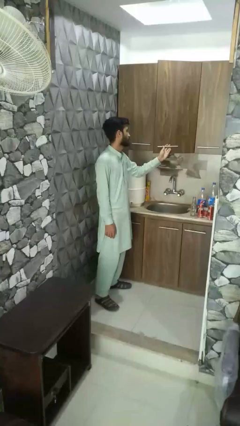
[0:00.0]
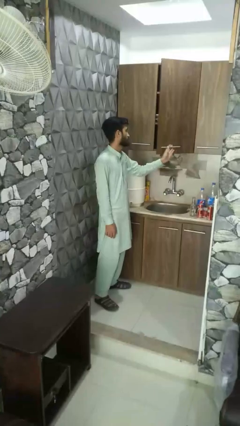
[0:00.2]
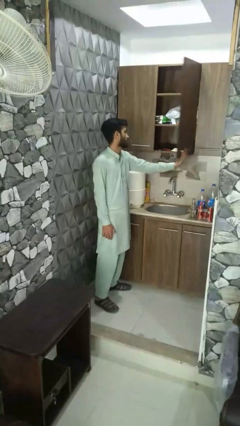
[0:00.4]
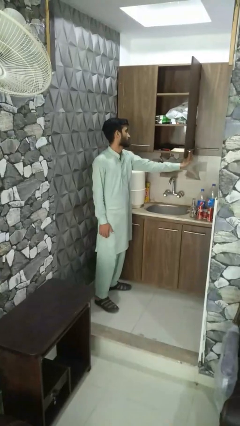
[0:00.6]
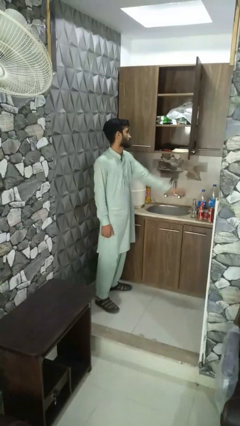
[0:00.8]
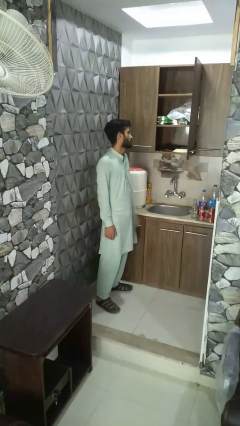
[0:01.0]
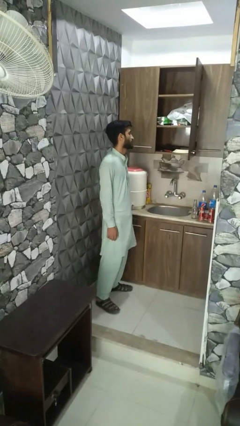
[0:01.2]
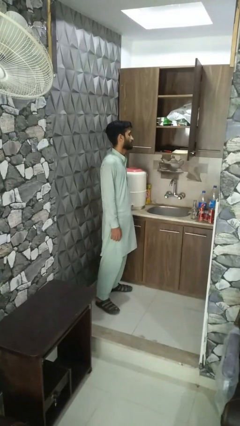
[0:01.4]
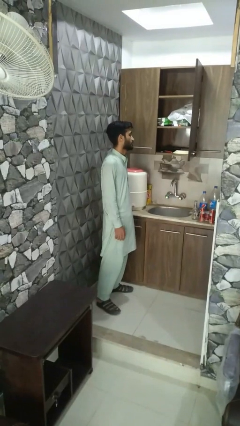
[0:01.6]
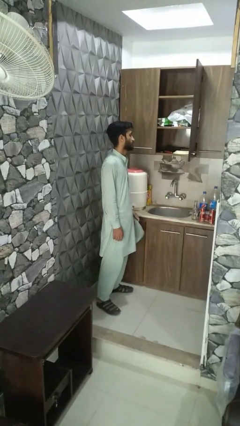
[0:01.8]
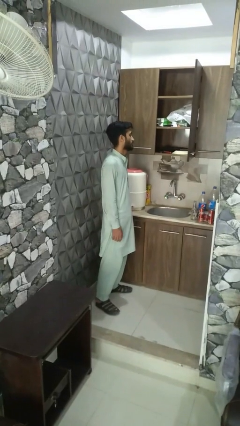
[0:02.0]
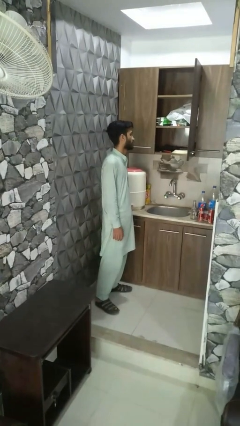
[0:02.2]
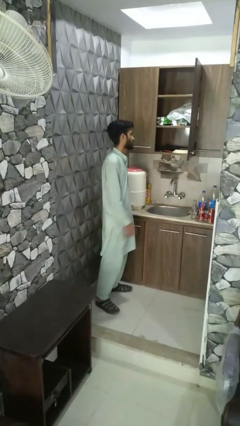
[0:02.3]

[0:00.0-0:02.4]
person opens cabinet

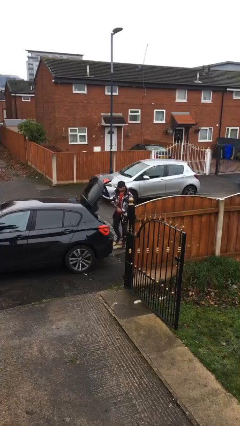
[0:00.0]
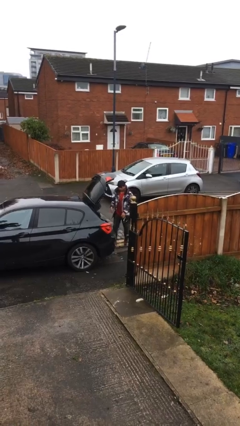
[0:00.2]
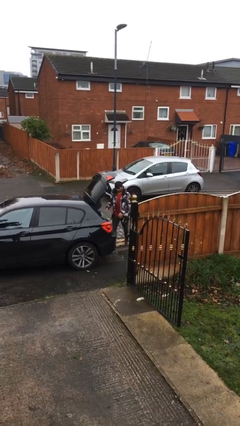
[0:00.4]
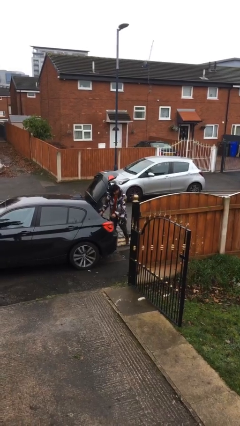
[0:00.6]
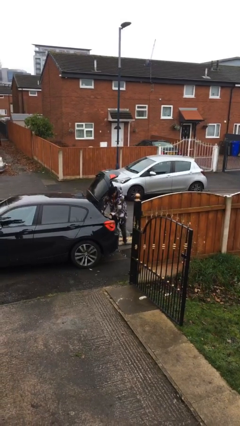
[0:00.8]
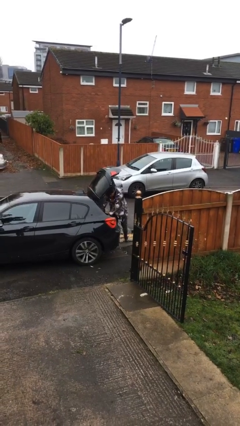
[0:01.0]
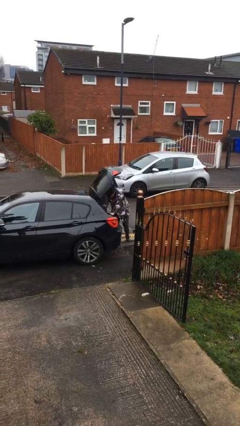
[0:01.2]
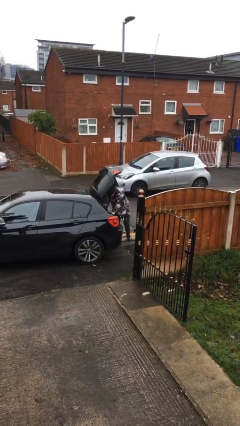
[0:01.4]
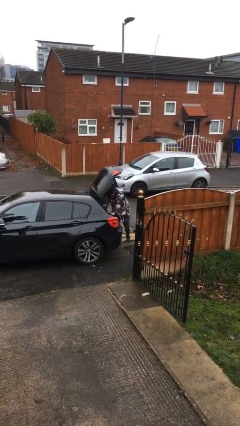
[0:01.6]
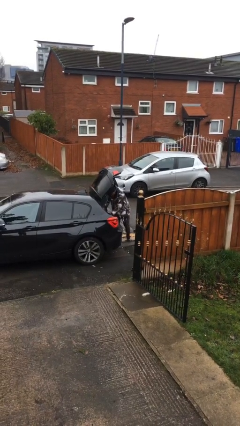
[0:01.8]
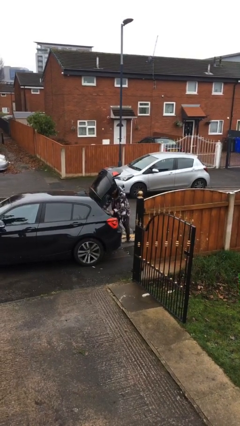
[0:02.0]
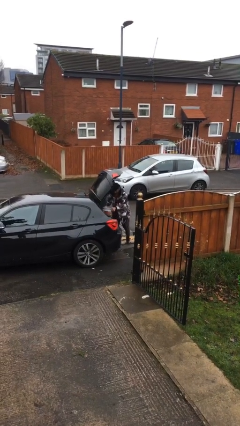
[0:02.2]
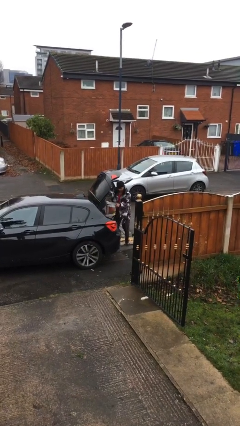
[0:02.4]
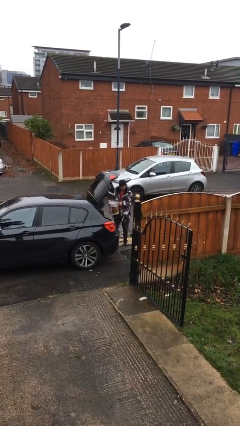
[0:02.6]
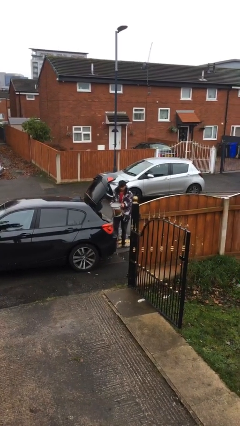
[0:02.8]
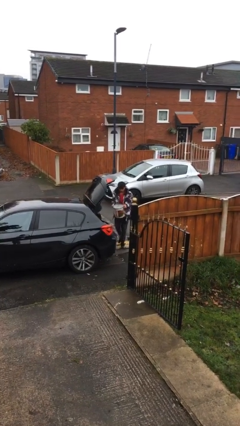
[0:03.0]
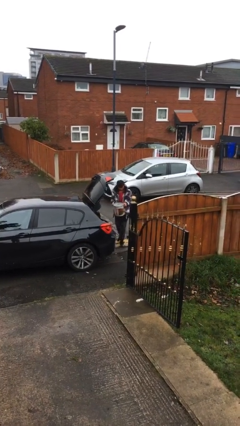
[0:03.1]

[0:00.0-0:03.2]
person unloads car

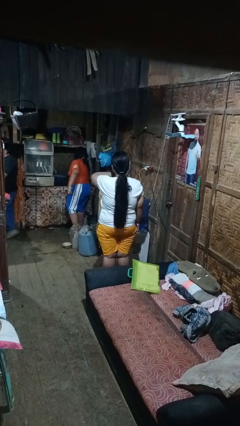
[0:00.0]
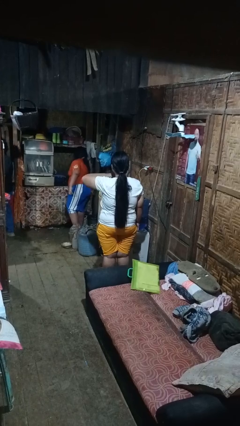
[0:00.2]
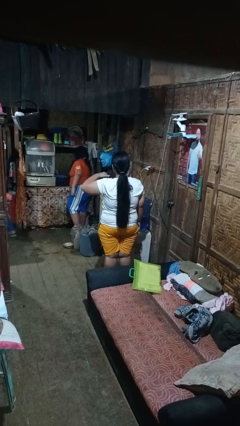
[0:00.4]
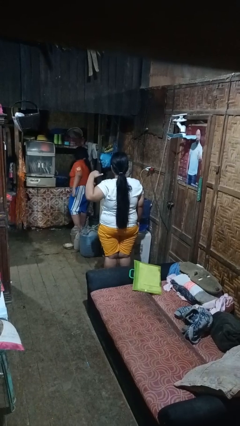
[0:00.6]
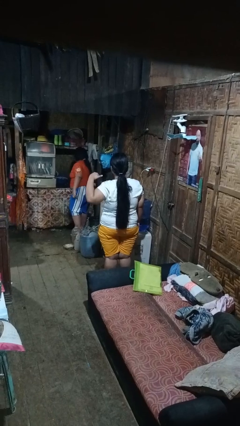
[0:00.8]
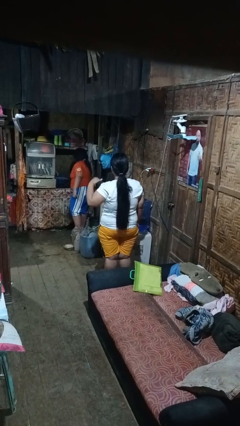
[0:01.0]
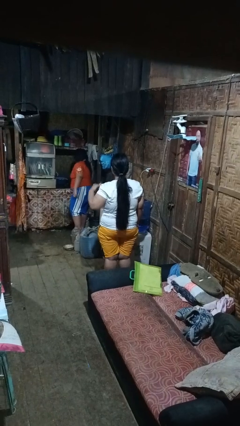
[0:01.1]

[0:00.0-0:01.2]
person gestures cut

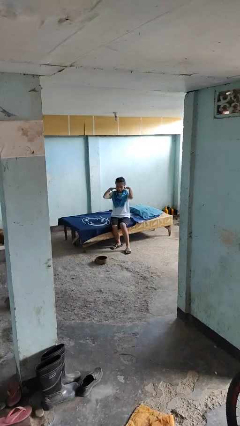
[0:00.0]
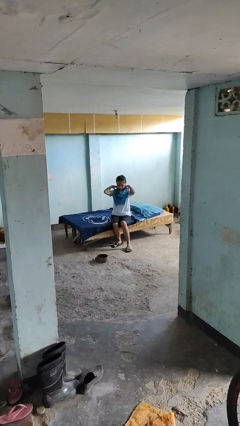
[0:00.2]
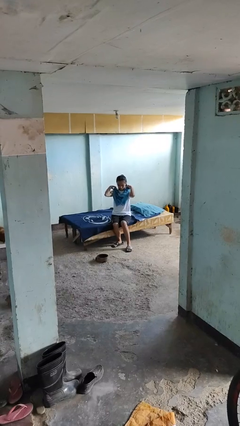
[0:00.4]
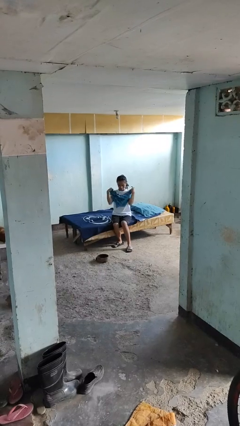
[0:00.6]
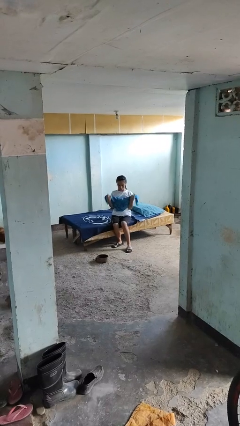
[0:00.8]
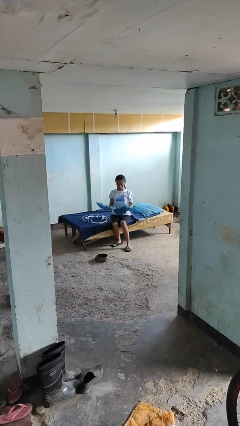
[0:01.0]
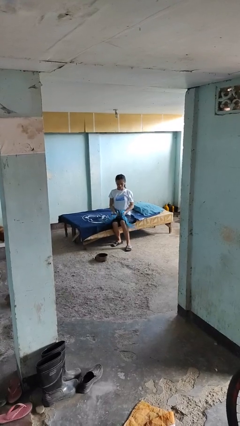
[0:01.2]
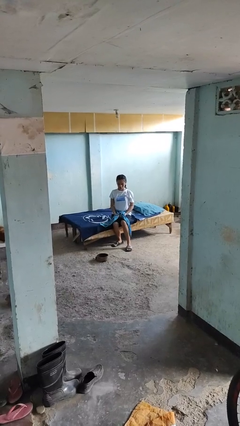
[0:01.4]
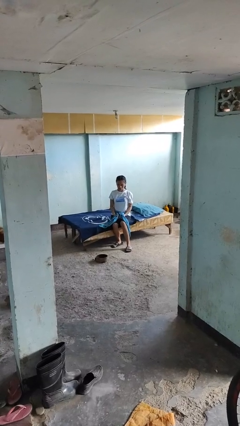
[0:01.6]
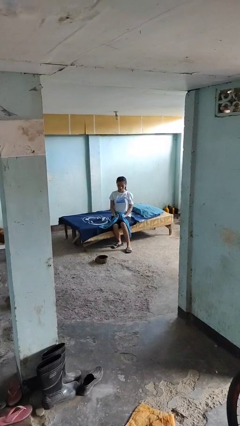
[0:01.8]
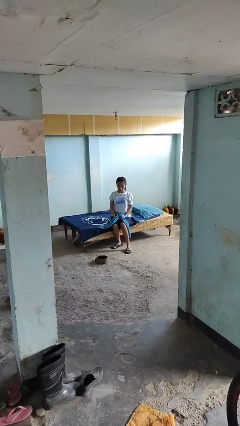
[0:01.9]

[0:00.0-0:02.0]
person takes off scarf

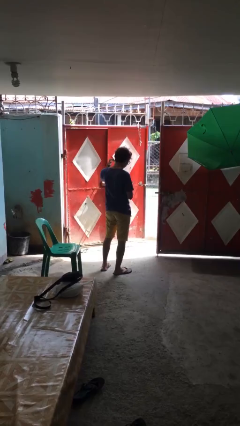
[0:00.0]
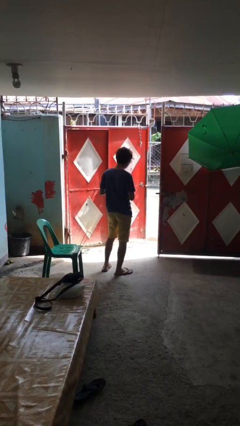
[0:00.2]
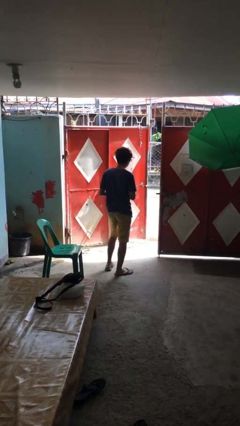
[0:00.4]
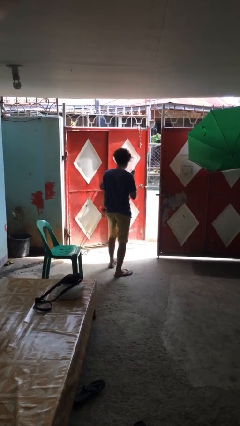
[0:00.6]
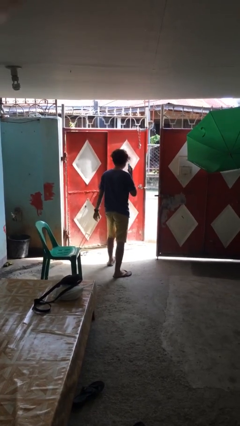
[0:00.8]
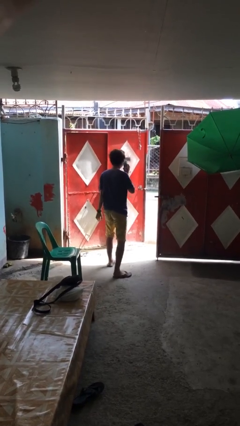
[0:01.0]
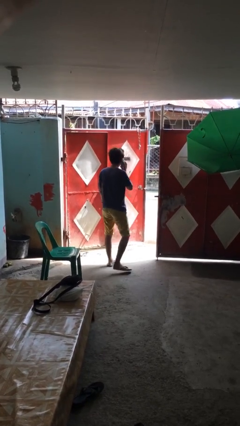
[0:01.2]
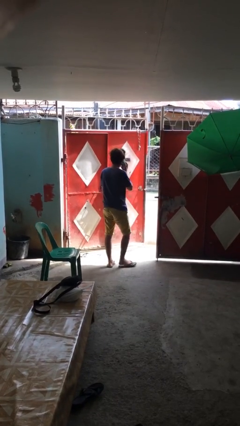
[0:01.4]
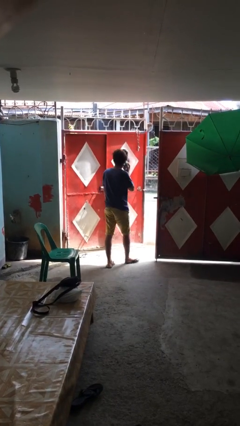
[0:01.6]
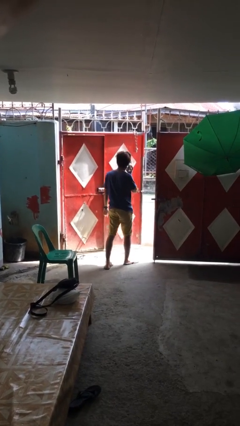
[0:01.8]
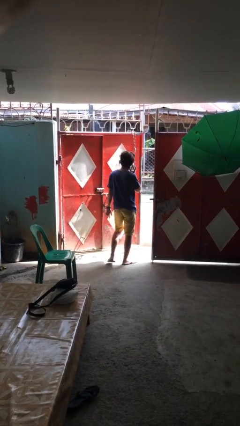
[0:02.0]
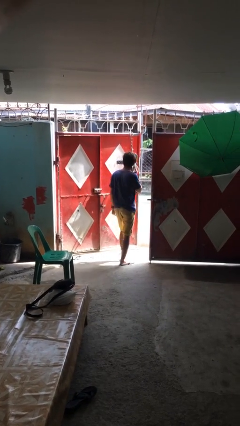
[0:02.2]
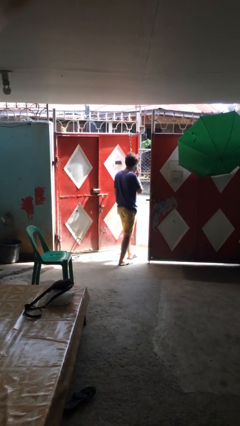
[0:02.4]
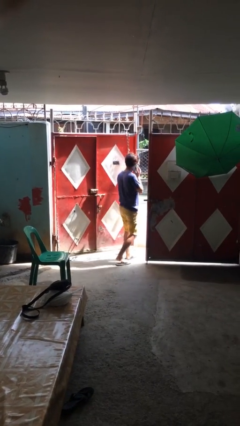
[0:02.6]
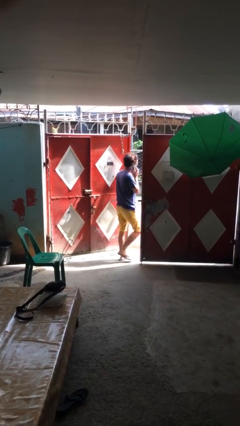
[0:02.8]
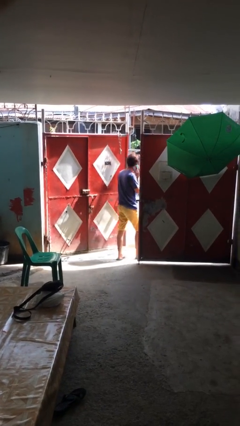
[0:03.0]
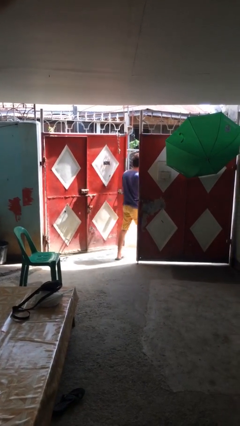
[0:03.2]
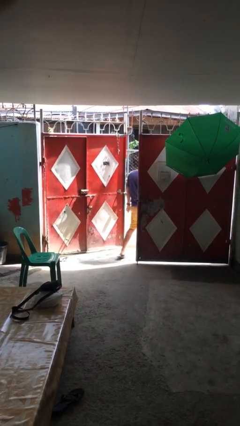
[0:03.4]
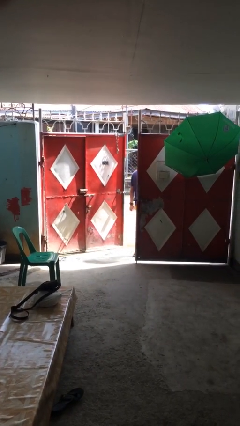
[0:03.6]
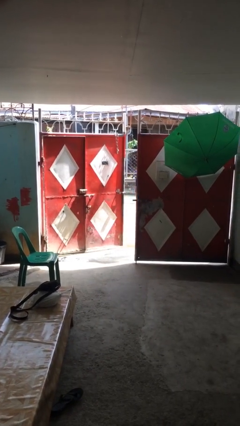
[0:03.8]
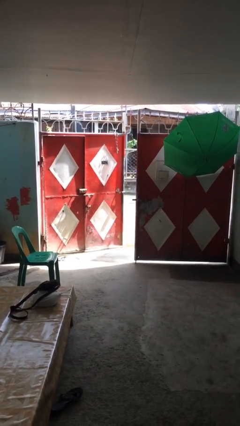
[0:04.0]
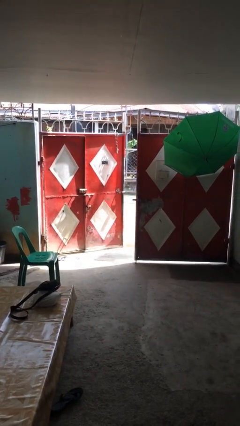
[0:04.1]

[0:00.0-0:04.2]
person exits scene through structure

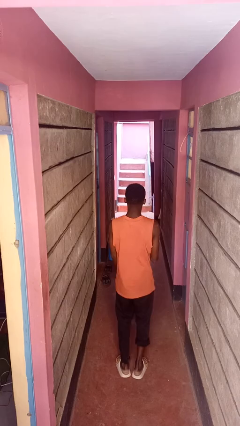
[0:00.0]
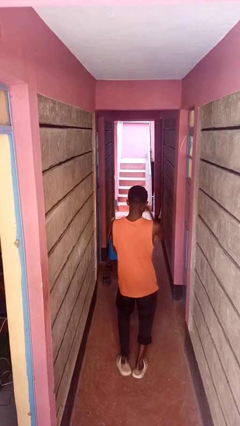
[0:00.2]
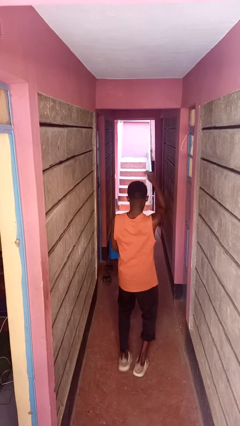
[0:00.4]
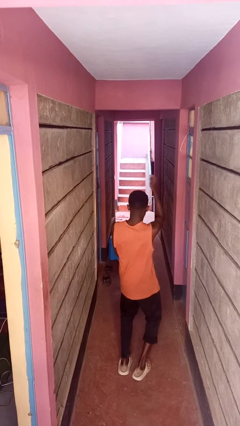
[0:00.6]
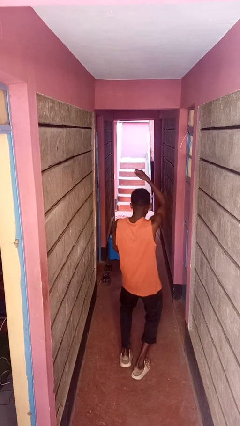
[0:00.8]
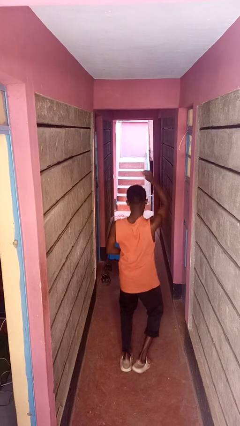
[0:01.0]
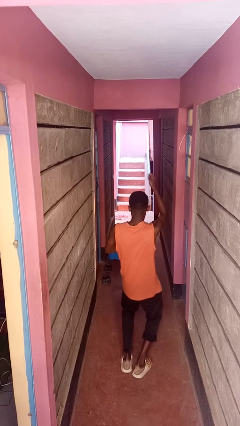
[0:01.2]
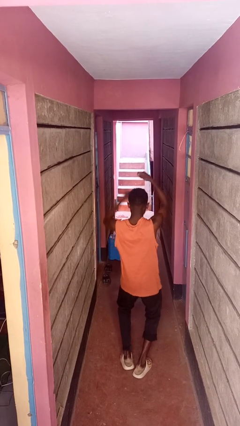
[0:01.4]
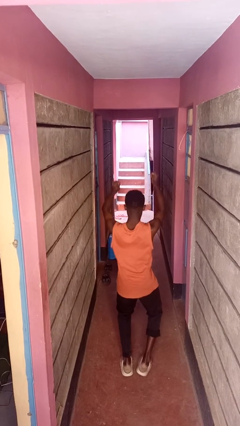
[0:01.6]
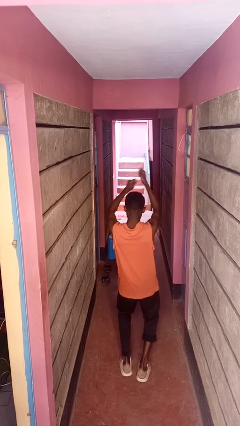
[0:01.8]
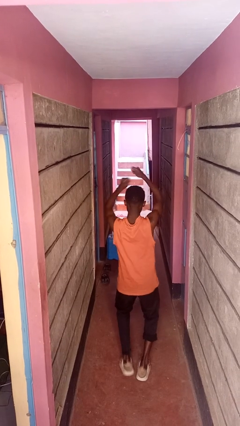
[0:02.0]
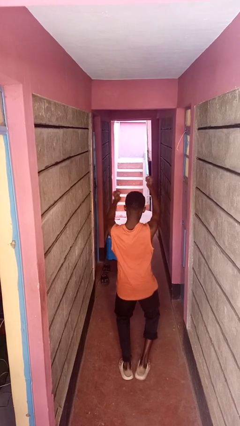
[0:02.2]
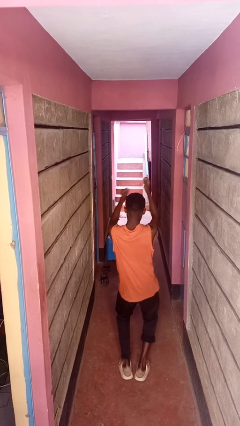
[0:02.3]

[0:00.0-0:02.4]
person dances in place

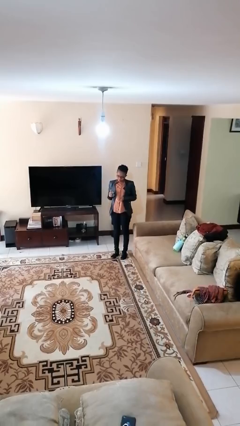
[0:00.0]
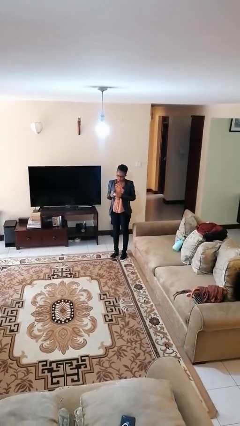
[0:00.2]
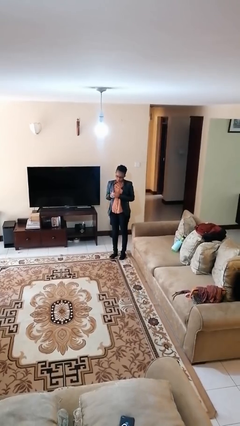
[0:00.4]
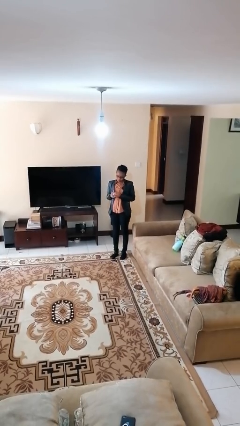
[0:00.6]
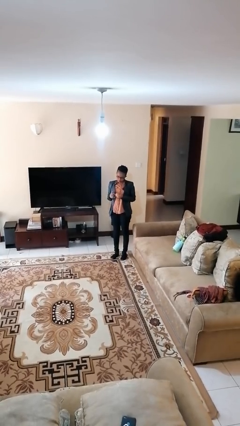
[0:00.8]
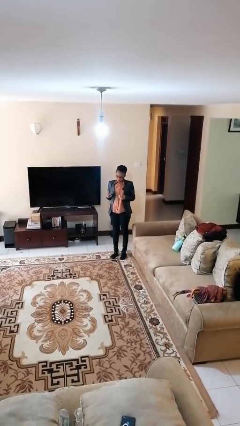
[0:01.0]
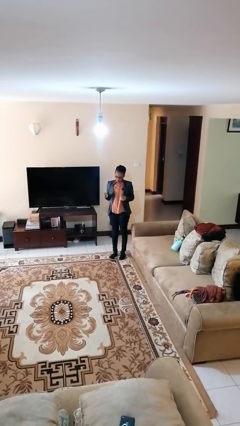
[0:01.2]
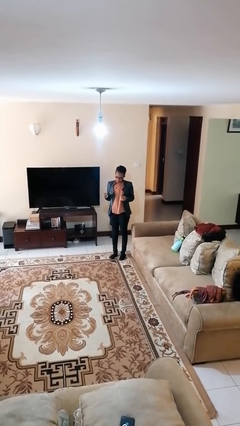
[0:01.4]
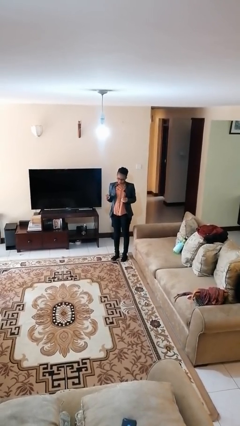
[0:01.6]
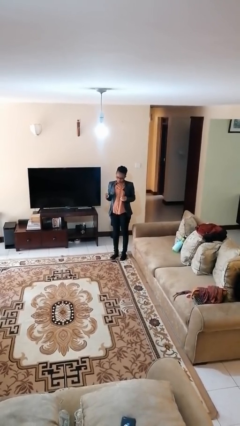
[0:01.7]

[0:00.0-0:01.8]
person takes off ring
